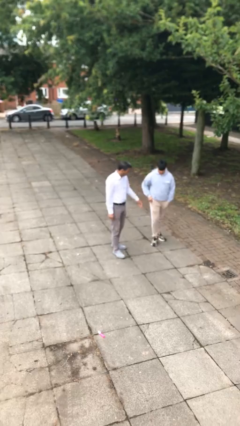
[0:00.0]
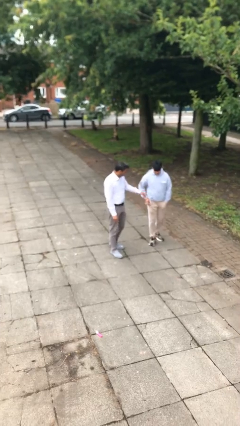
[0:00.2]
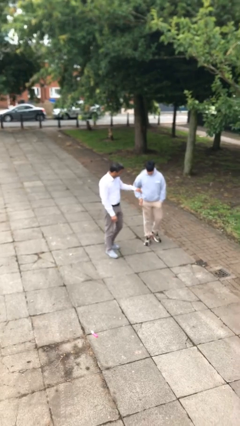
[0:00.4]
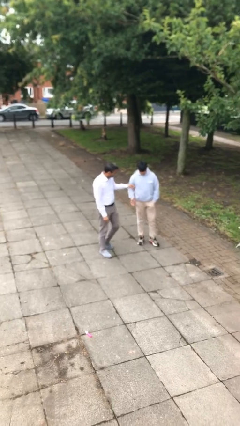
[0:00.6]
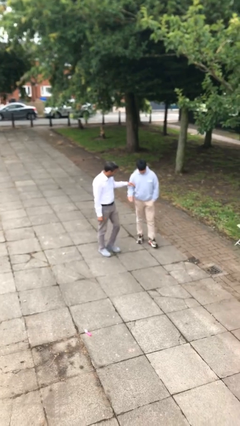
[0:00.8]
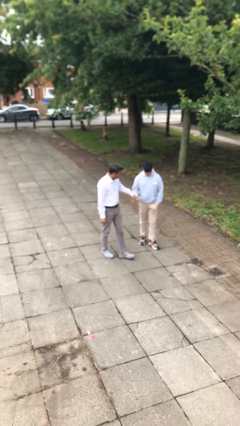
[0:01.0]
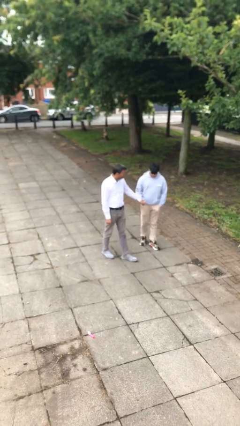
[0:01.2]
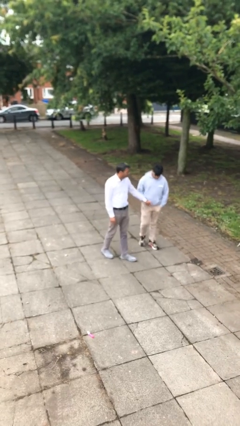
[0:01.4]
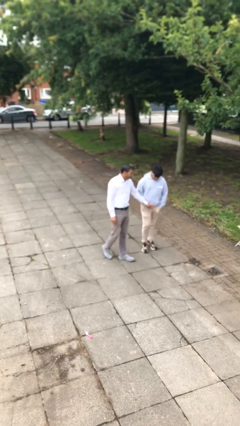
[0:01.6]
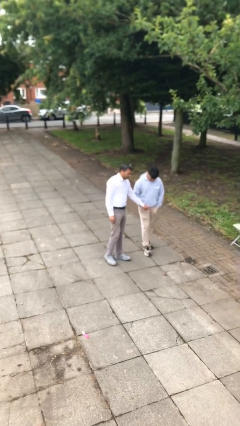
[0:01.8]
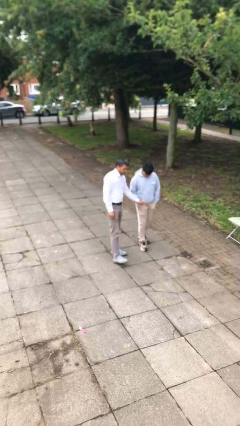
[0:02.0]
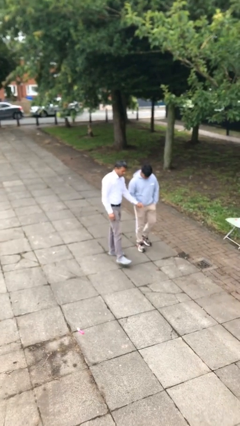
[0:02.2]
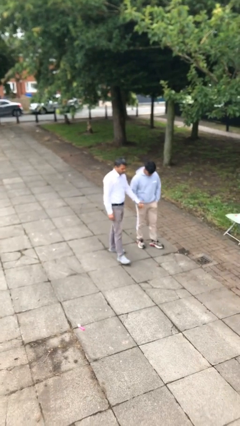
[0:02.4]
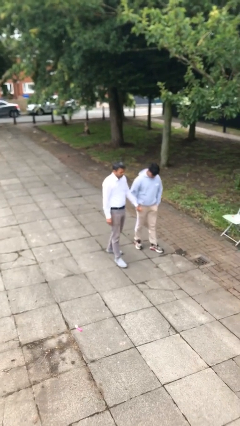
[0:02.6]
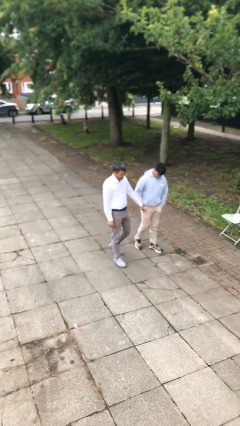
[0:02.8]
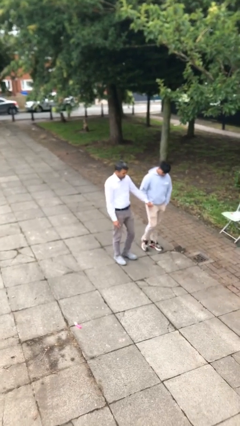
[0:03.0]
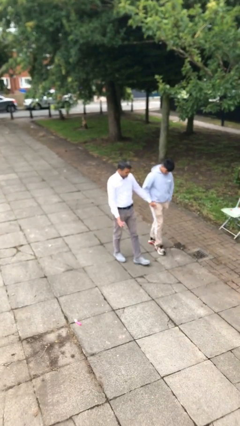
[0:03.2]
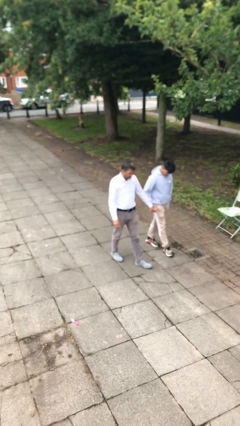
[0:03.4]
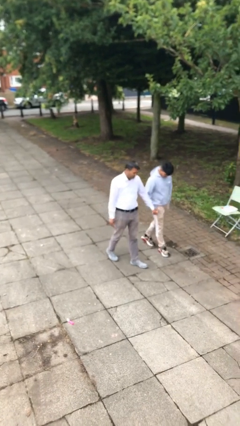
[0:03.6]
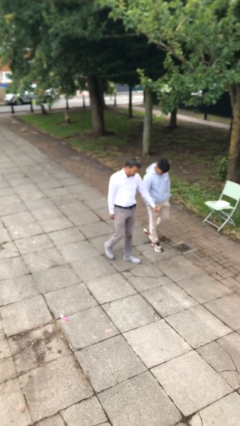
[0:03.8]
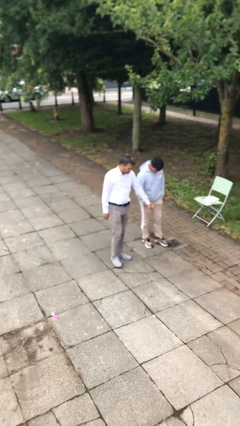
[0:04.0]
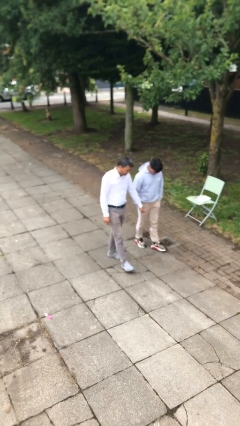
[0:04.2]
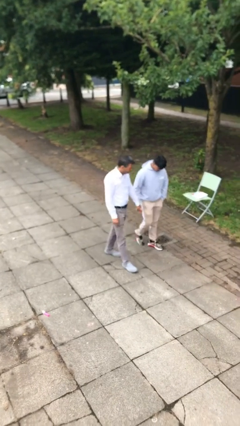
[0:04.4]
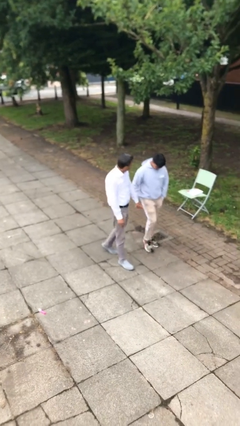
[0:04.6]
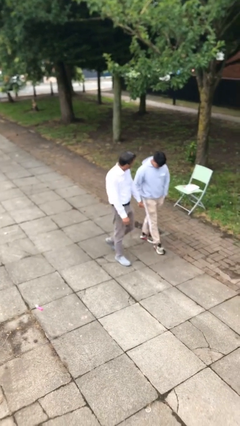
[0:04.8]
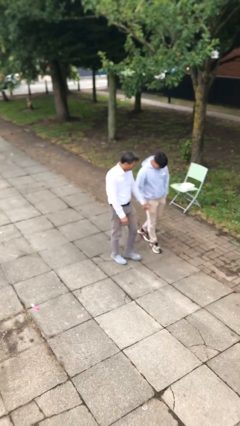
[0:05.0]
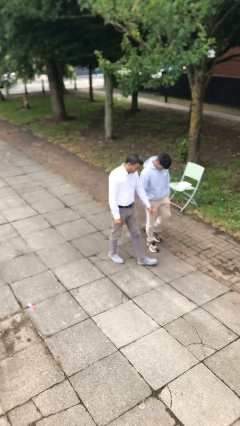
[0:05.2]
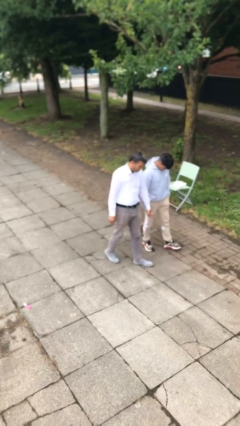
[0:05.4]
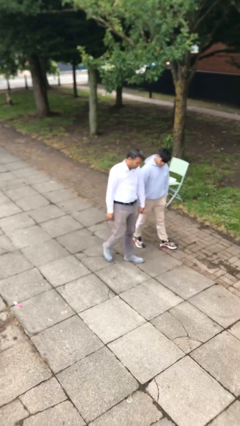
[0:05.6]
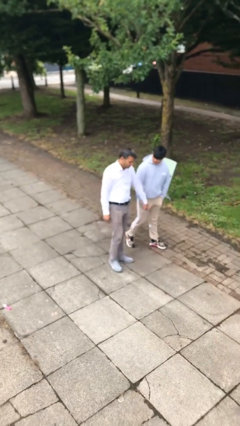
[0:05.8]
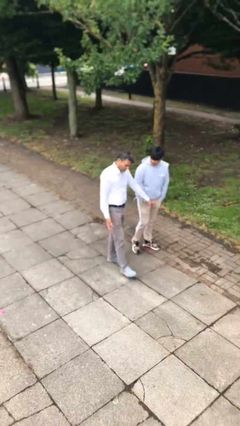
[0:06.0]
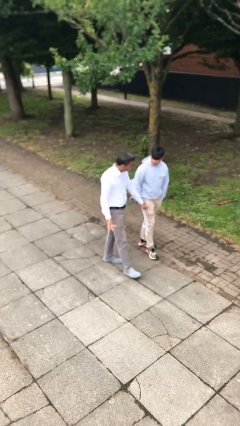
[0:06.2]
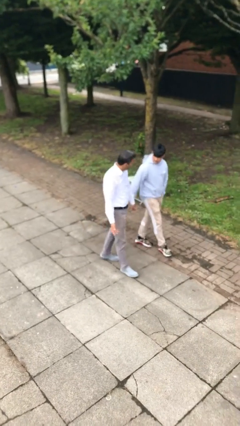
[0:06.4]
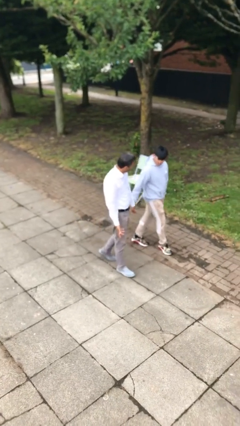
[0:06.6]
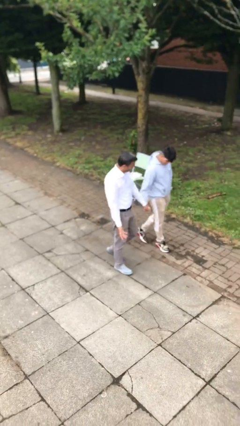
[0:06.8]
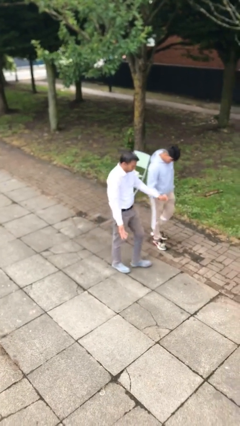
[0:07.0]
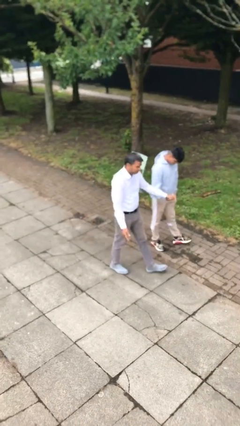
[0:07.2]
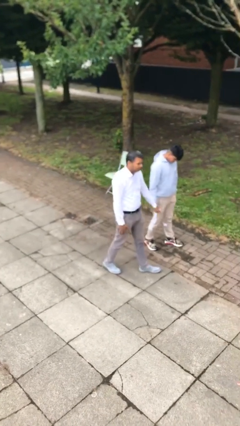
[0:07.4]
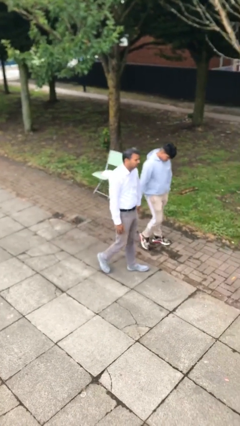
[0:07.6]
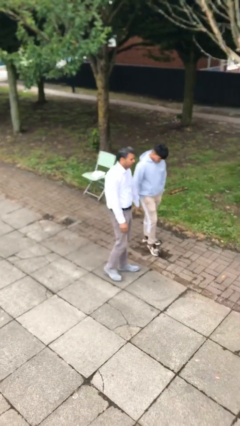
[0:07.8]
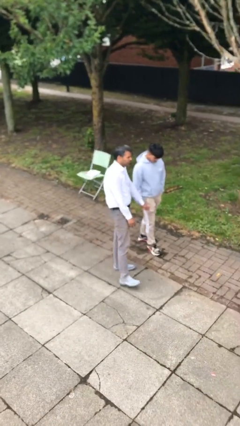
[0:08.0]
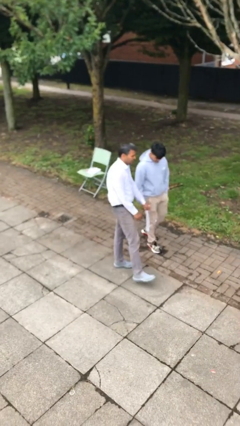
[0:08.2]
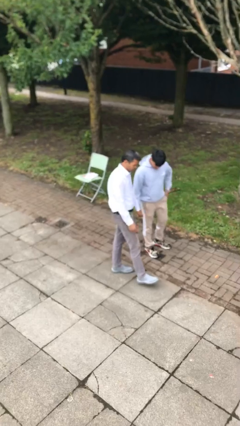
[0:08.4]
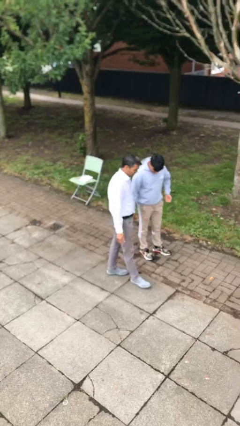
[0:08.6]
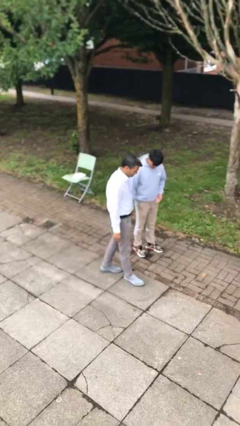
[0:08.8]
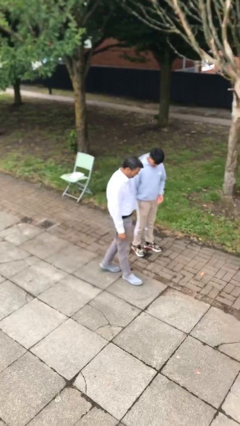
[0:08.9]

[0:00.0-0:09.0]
person holds hand

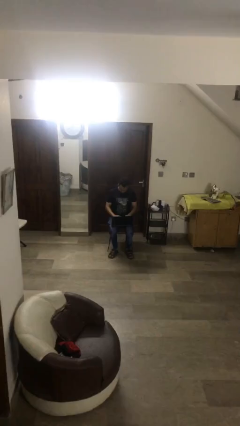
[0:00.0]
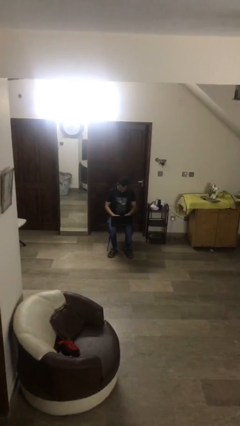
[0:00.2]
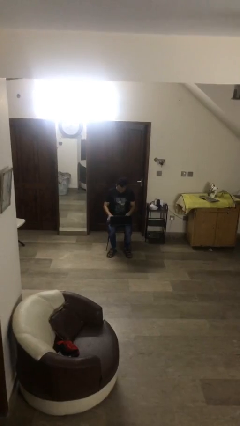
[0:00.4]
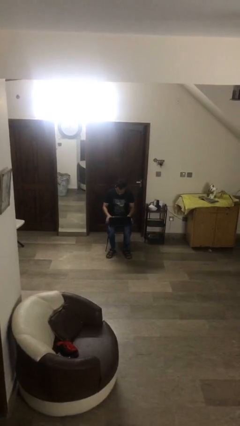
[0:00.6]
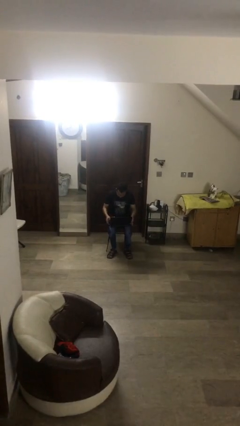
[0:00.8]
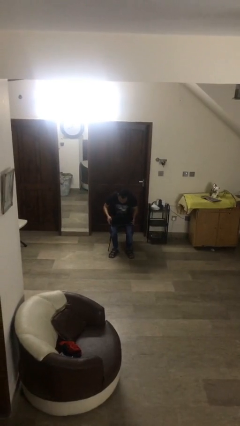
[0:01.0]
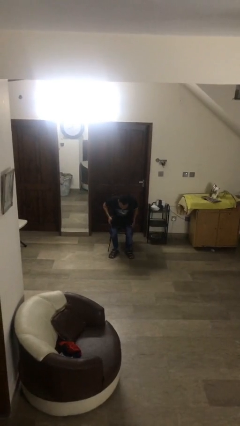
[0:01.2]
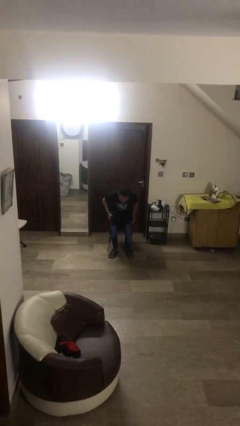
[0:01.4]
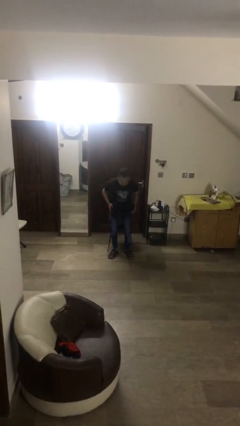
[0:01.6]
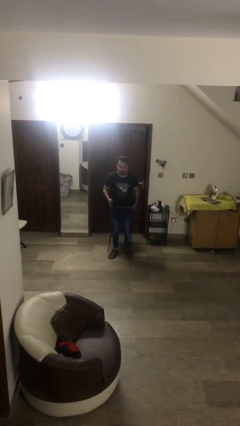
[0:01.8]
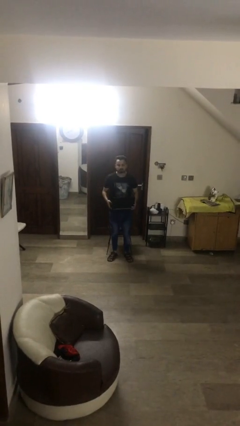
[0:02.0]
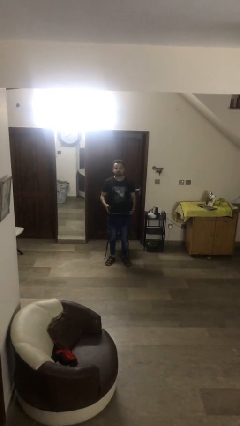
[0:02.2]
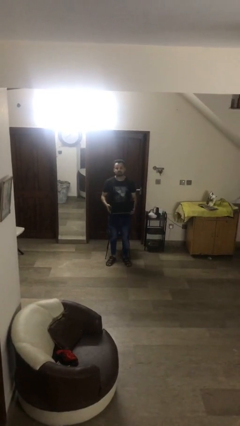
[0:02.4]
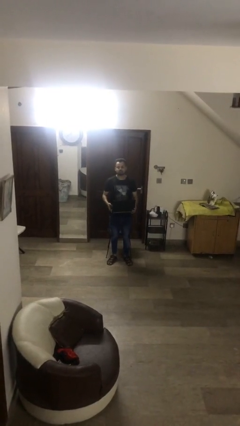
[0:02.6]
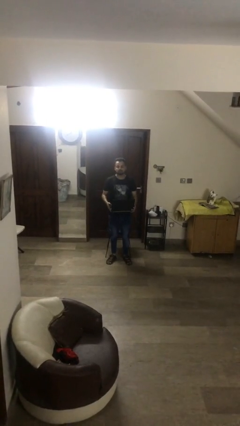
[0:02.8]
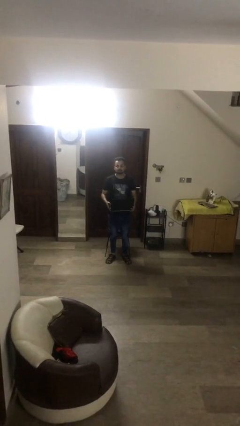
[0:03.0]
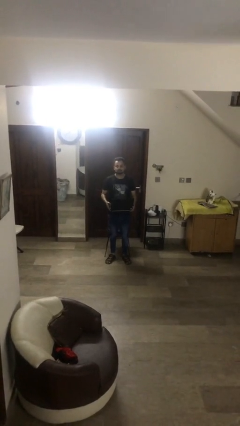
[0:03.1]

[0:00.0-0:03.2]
person stands up

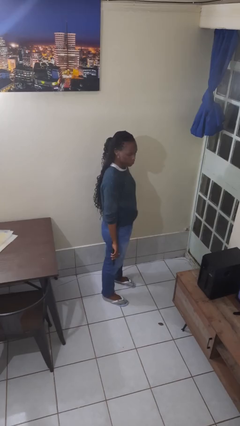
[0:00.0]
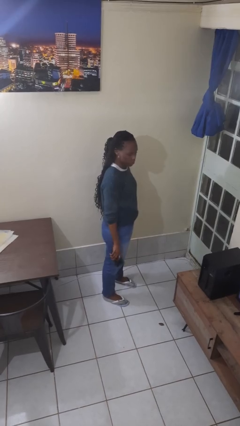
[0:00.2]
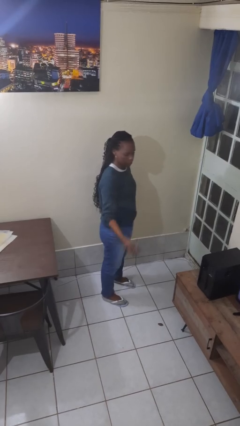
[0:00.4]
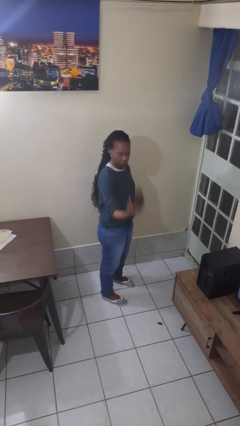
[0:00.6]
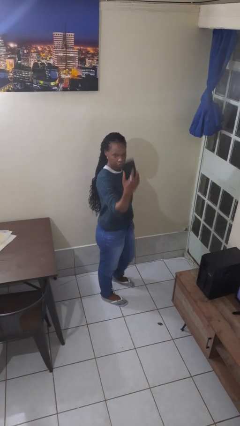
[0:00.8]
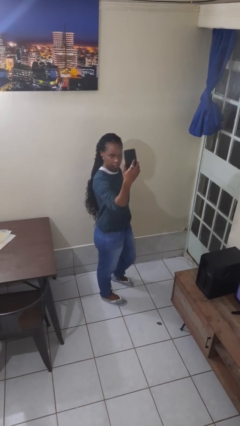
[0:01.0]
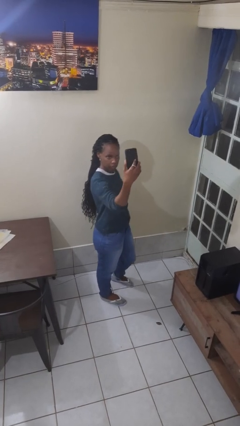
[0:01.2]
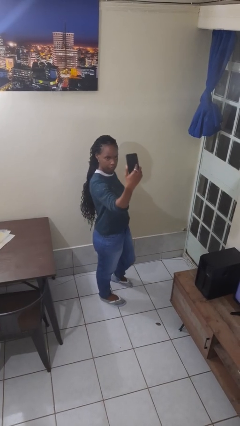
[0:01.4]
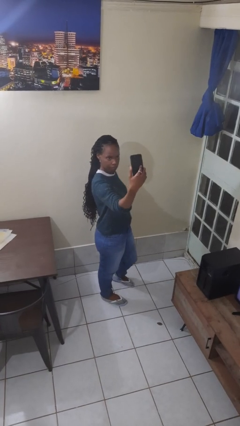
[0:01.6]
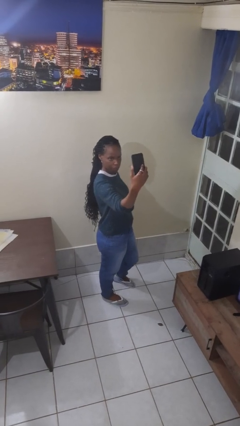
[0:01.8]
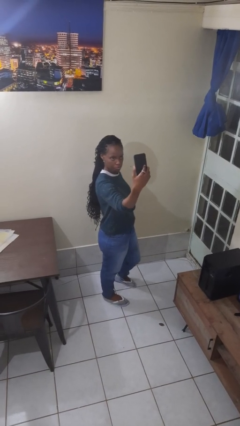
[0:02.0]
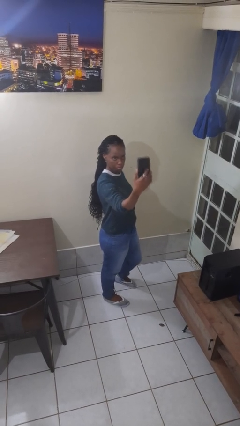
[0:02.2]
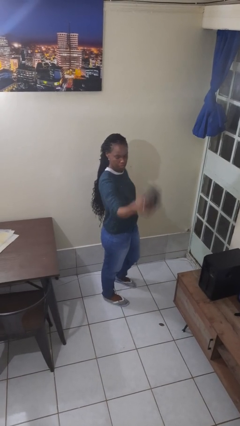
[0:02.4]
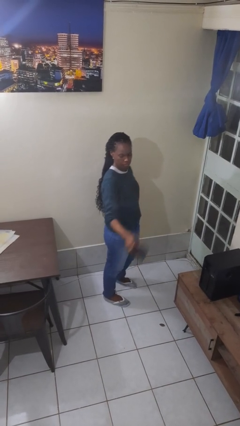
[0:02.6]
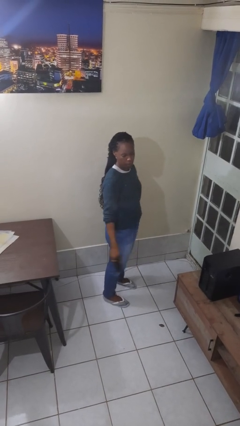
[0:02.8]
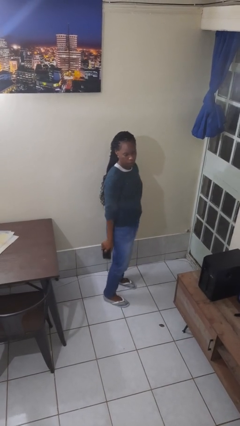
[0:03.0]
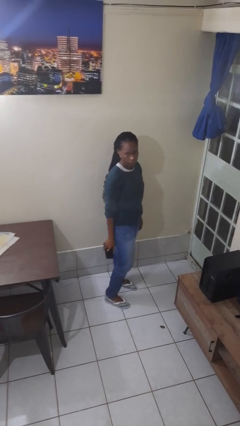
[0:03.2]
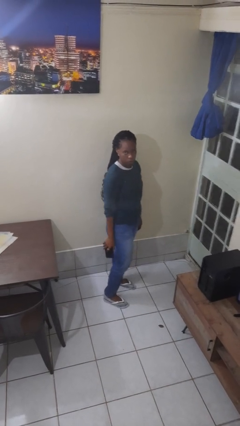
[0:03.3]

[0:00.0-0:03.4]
person takes selfie

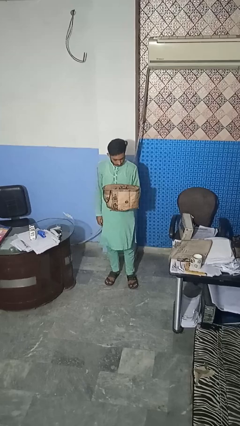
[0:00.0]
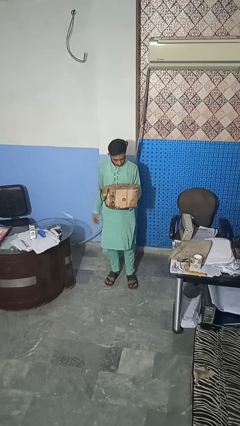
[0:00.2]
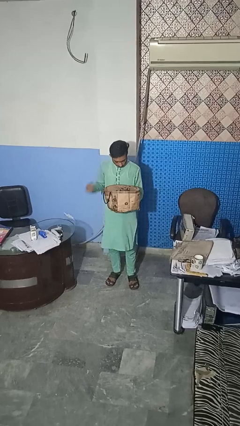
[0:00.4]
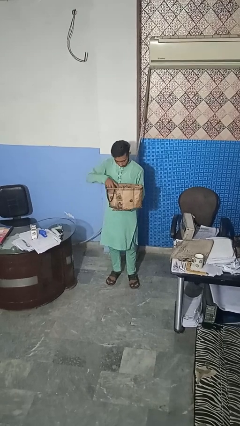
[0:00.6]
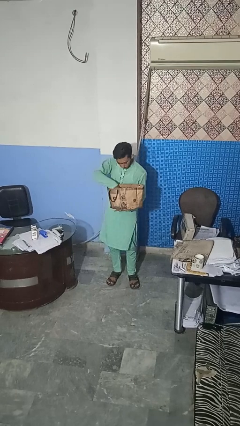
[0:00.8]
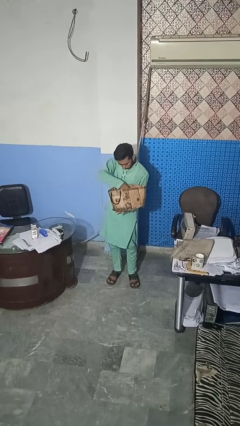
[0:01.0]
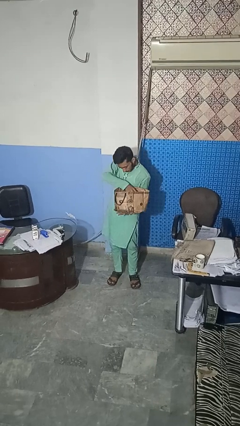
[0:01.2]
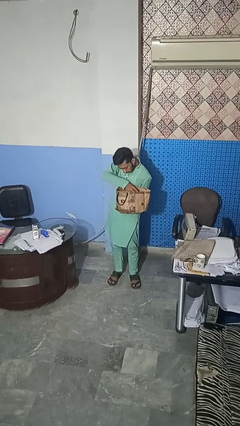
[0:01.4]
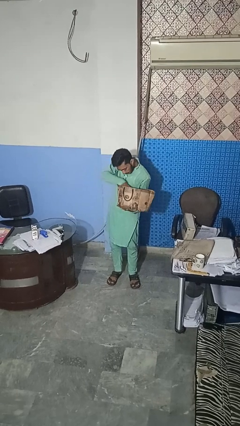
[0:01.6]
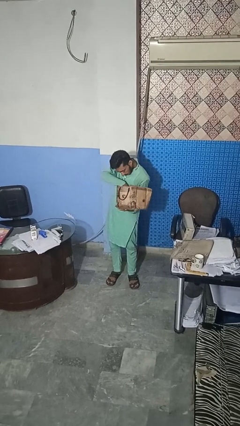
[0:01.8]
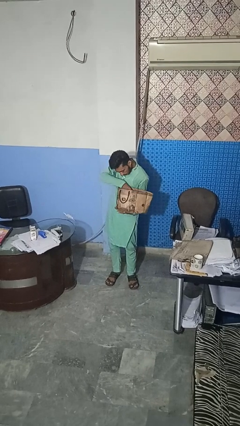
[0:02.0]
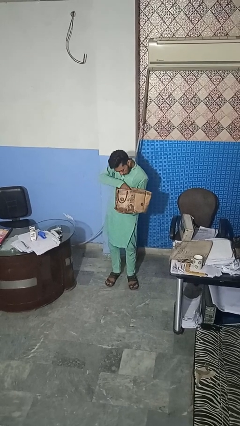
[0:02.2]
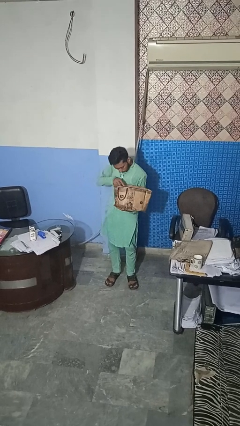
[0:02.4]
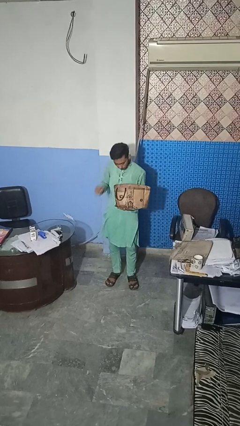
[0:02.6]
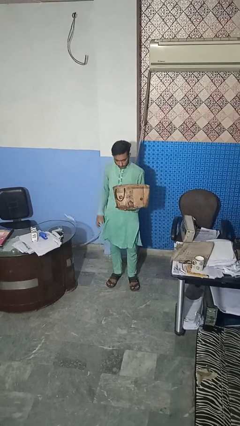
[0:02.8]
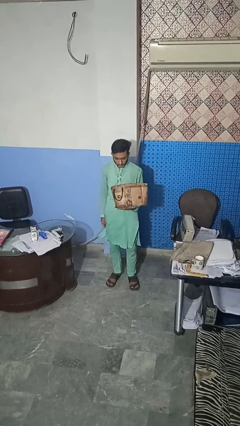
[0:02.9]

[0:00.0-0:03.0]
person searches in bag
